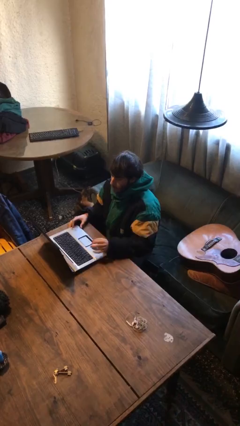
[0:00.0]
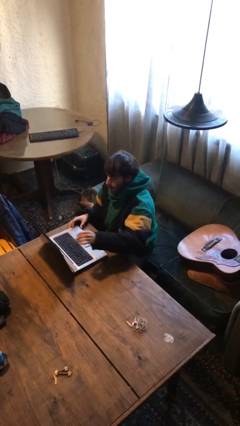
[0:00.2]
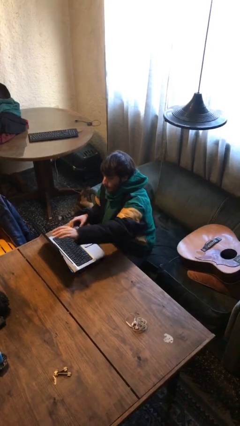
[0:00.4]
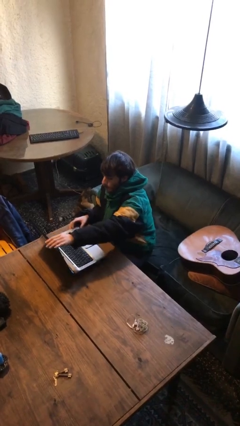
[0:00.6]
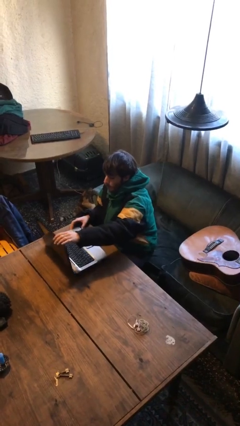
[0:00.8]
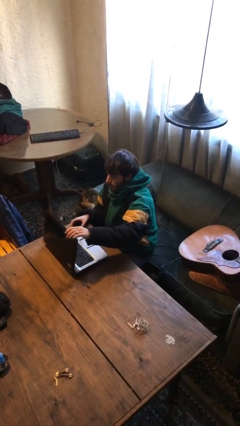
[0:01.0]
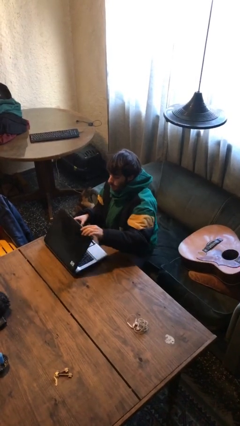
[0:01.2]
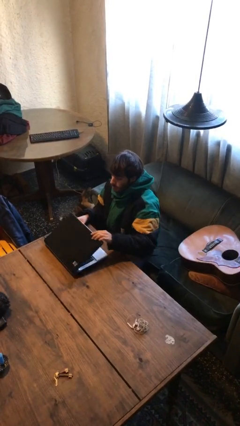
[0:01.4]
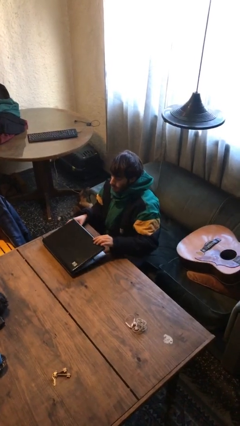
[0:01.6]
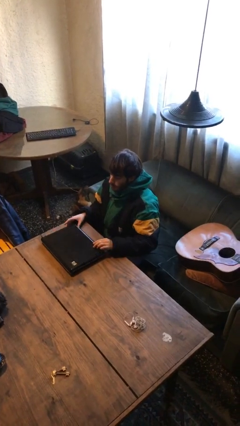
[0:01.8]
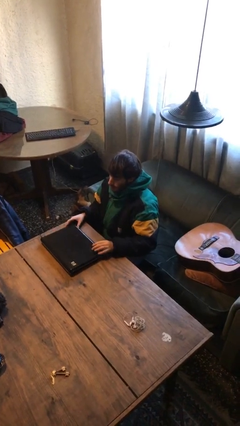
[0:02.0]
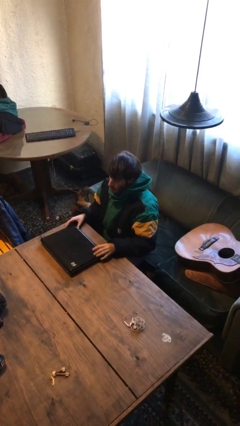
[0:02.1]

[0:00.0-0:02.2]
person closes laptop

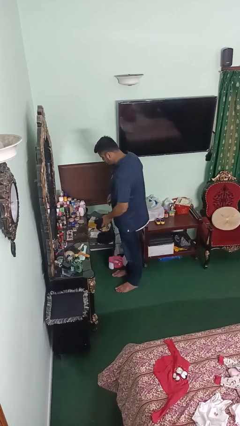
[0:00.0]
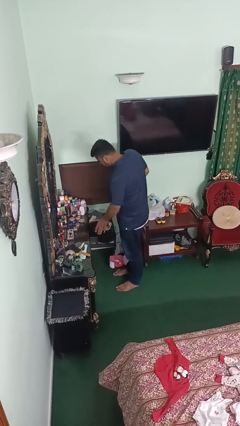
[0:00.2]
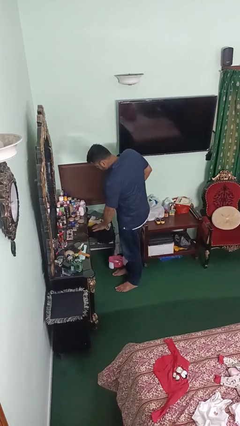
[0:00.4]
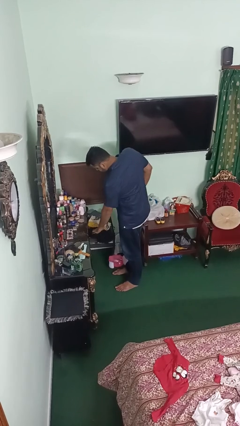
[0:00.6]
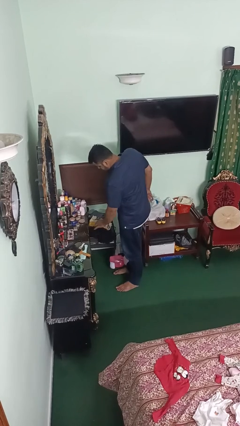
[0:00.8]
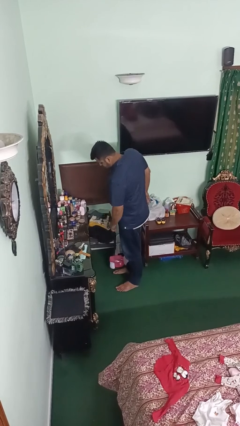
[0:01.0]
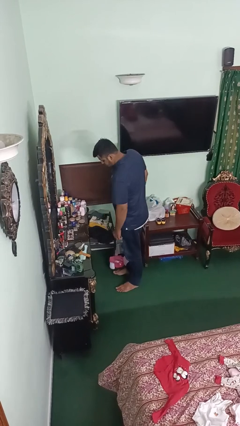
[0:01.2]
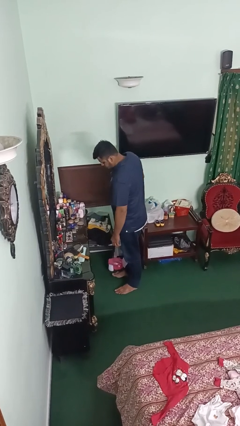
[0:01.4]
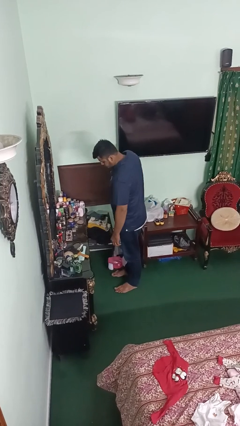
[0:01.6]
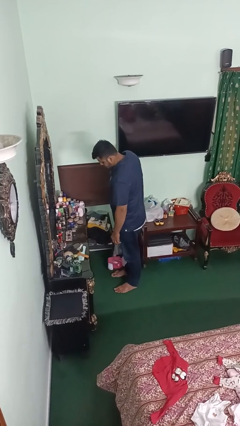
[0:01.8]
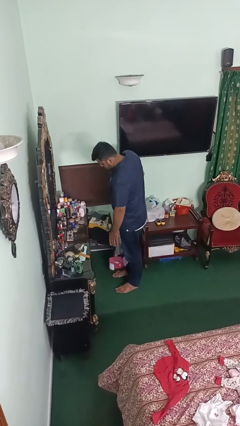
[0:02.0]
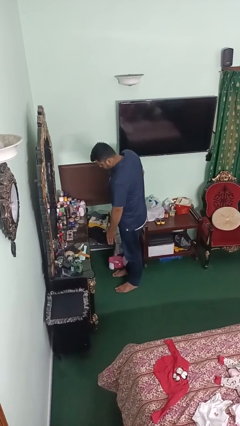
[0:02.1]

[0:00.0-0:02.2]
person puts clothes into dresser

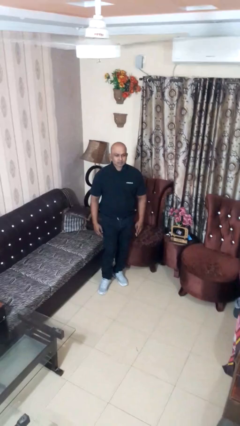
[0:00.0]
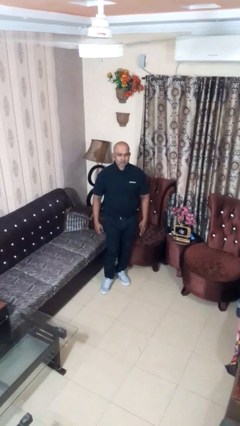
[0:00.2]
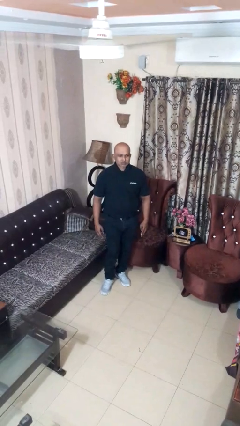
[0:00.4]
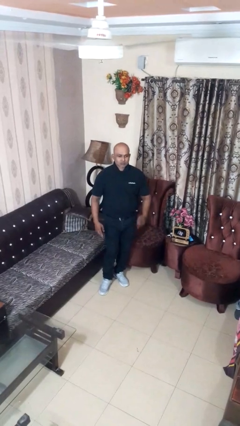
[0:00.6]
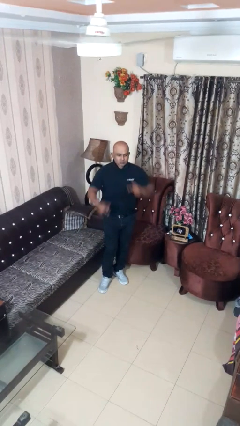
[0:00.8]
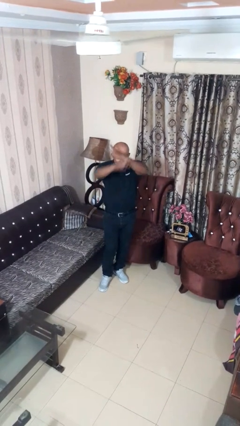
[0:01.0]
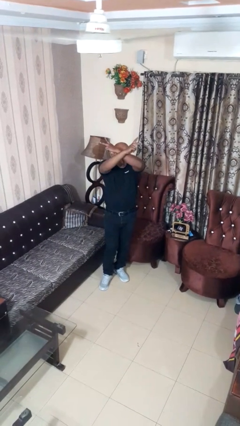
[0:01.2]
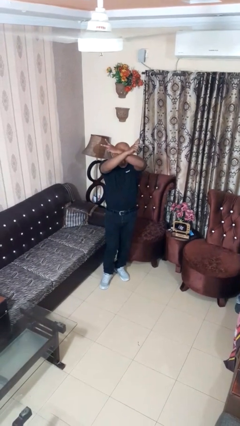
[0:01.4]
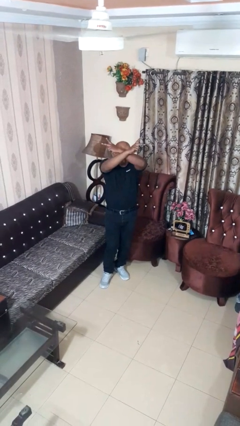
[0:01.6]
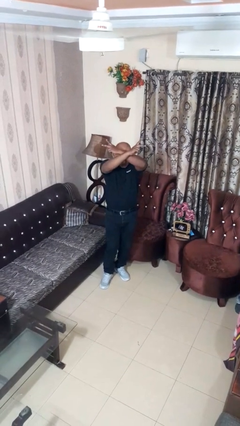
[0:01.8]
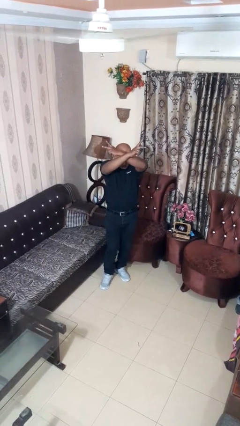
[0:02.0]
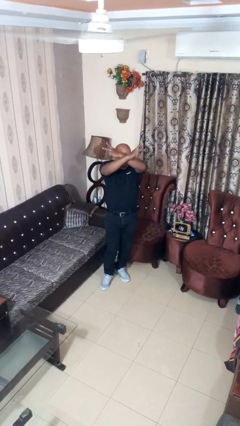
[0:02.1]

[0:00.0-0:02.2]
person gestures arms x

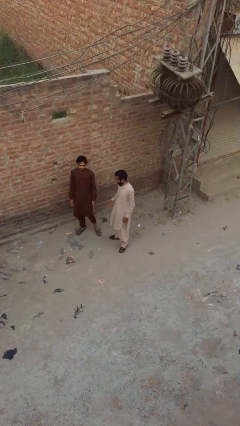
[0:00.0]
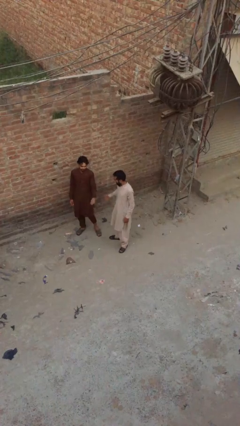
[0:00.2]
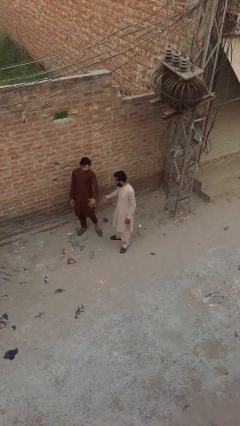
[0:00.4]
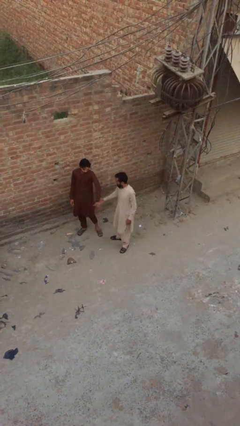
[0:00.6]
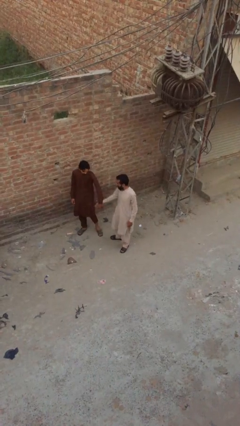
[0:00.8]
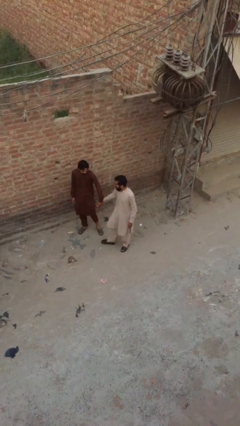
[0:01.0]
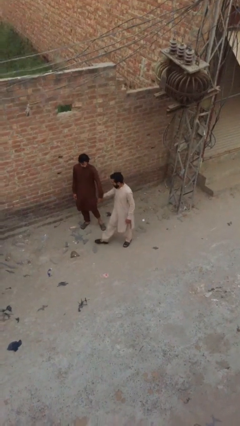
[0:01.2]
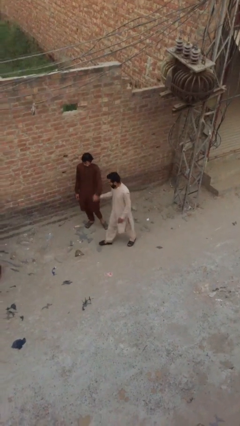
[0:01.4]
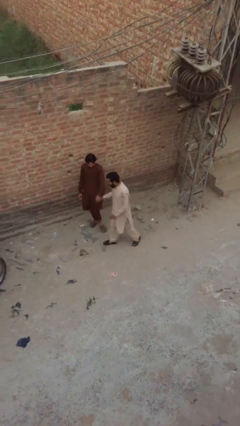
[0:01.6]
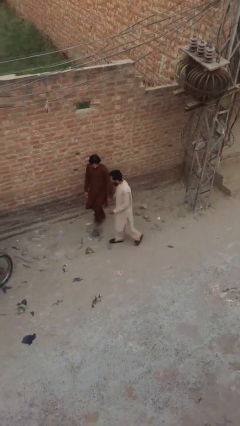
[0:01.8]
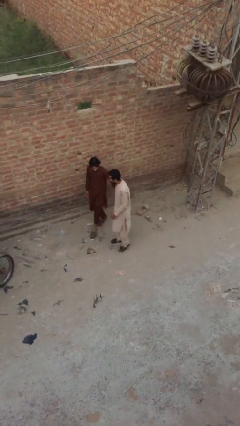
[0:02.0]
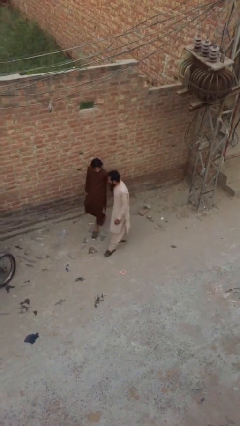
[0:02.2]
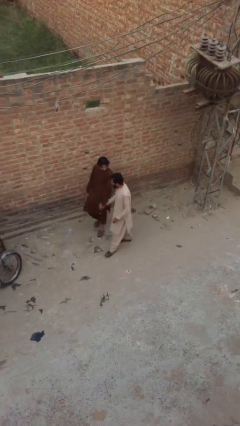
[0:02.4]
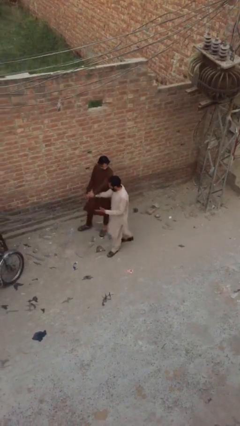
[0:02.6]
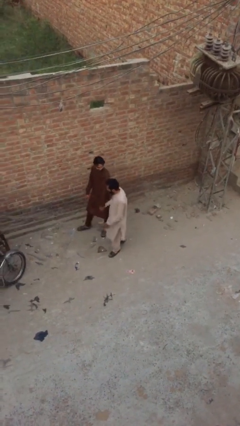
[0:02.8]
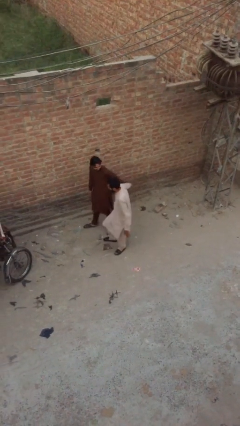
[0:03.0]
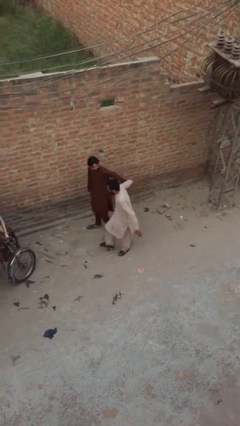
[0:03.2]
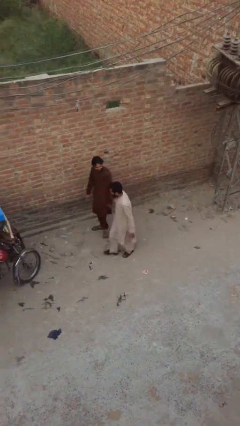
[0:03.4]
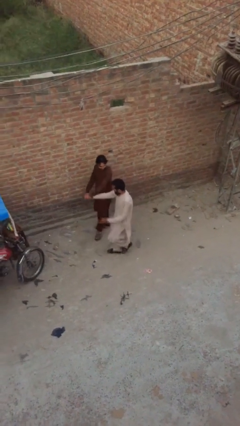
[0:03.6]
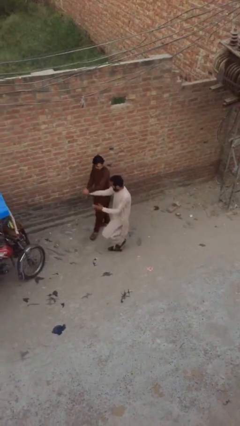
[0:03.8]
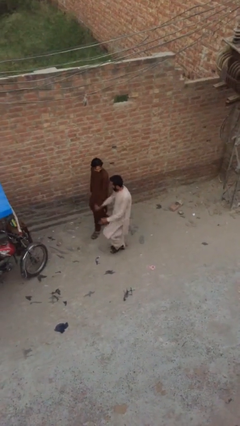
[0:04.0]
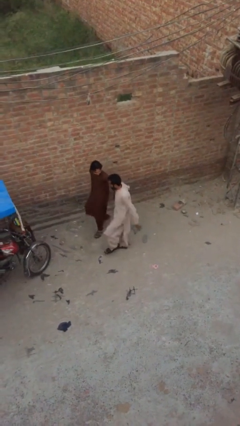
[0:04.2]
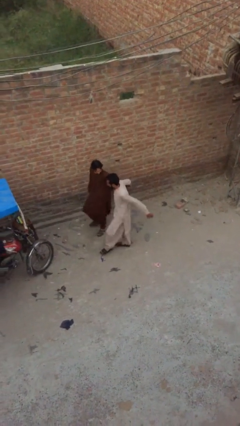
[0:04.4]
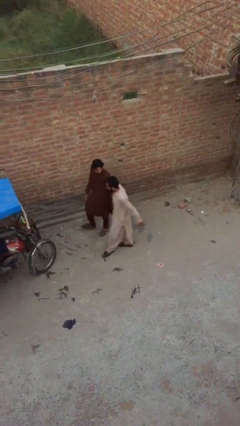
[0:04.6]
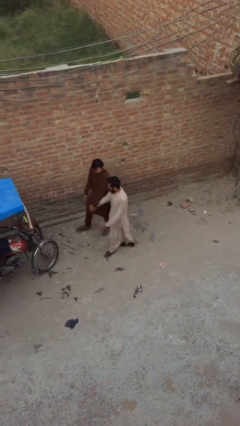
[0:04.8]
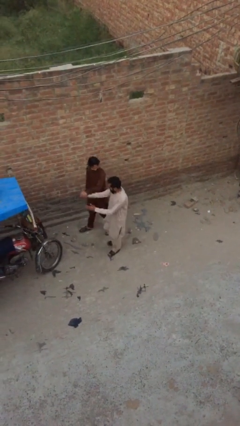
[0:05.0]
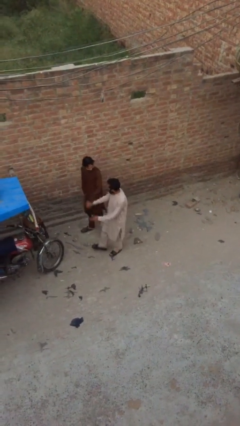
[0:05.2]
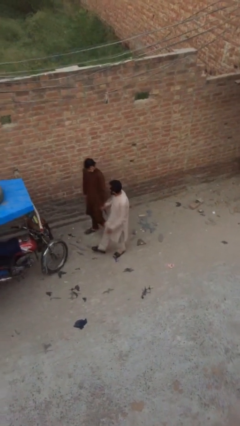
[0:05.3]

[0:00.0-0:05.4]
person holds hand

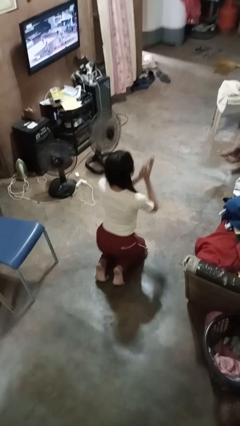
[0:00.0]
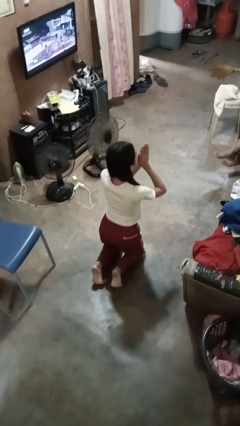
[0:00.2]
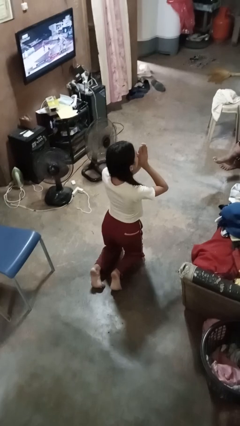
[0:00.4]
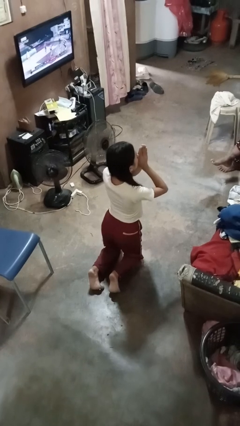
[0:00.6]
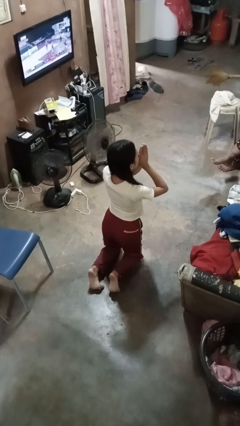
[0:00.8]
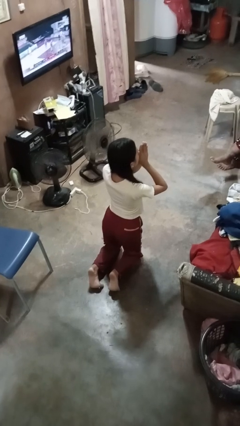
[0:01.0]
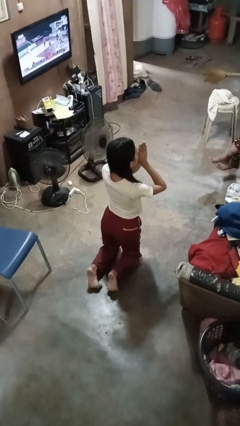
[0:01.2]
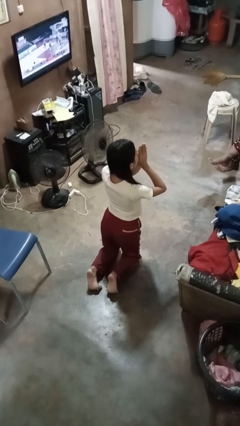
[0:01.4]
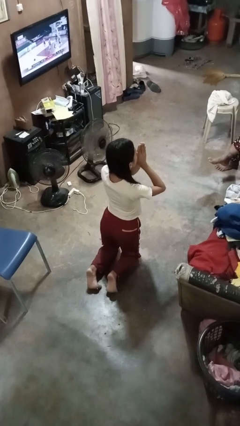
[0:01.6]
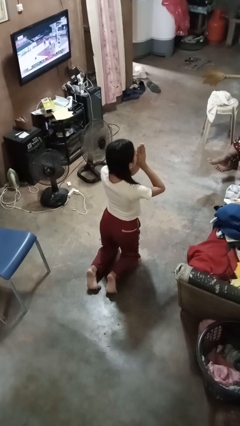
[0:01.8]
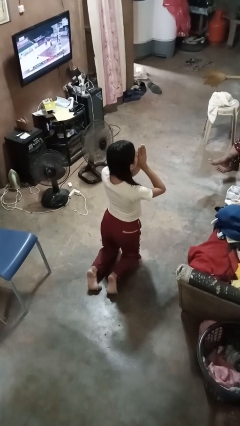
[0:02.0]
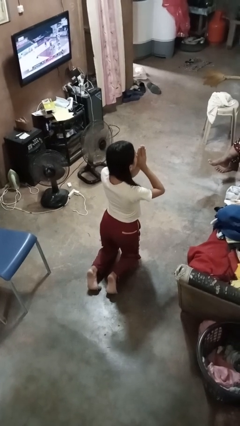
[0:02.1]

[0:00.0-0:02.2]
person prays

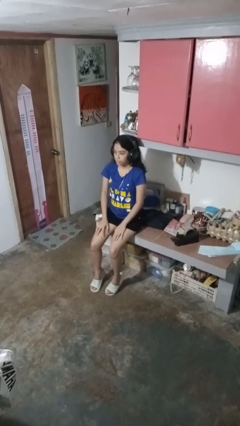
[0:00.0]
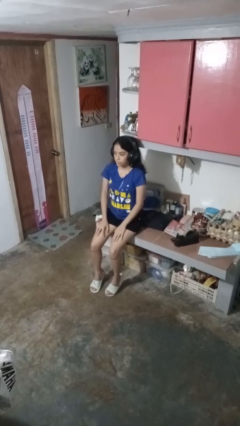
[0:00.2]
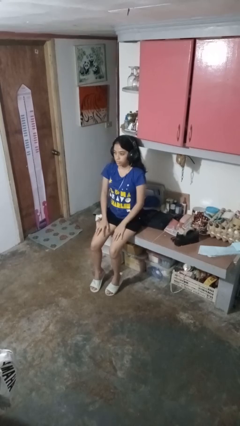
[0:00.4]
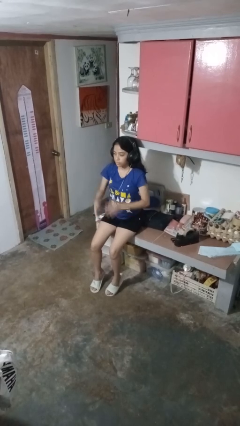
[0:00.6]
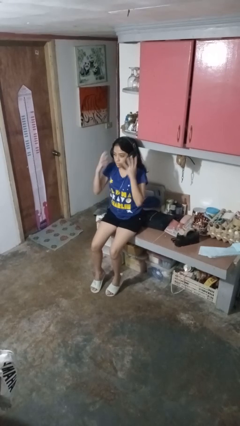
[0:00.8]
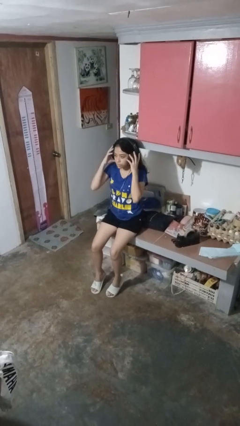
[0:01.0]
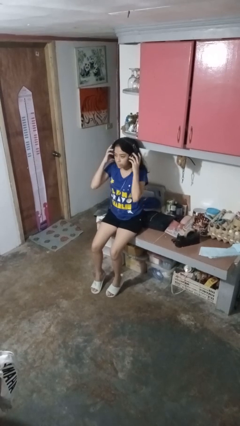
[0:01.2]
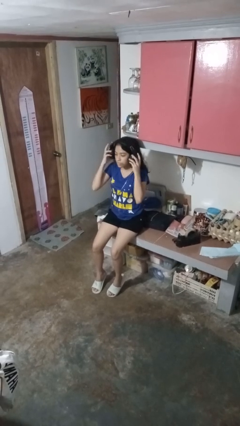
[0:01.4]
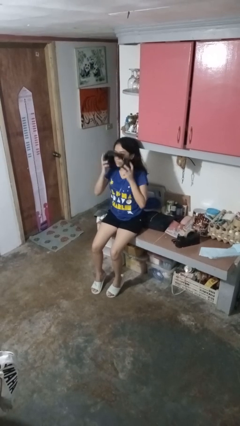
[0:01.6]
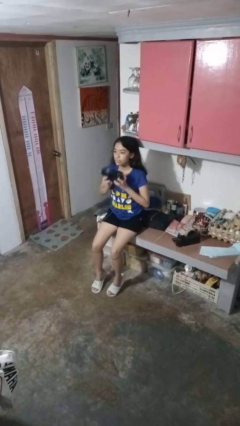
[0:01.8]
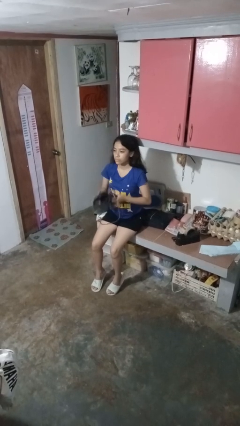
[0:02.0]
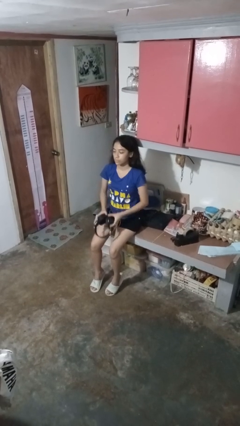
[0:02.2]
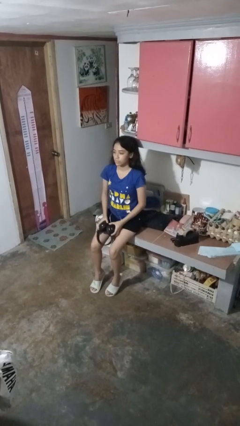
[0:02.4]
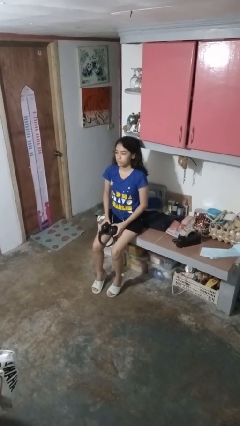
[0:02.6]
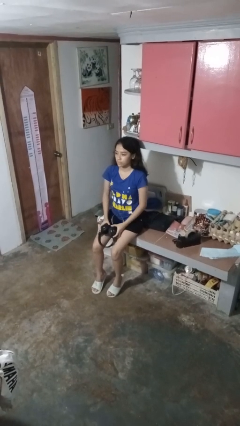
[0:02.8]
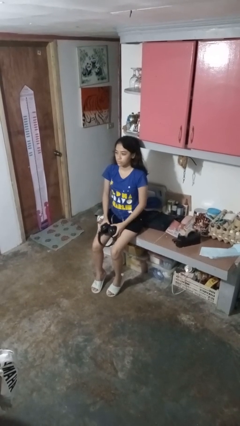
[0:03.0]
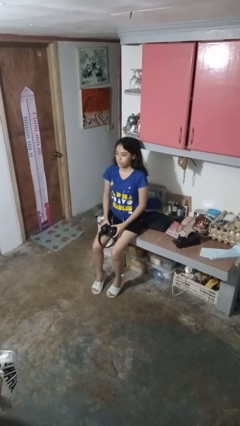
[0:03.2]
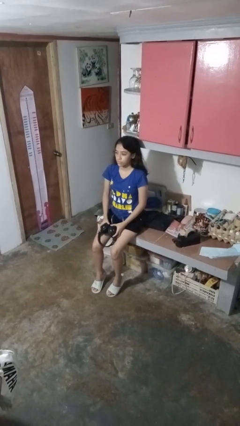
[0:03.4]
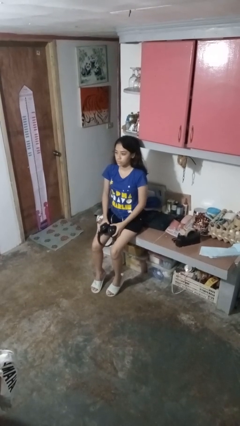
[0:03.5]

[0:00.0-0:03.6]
person takes off headphones
